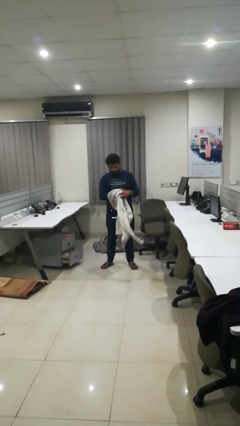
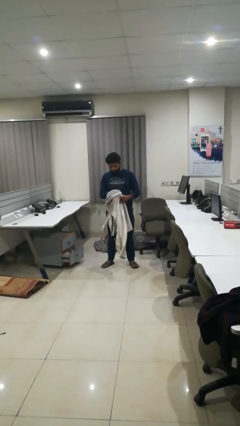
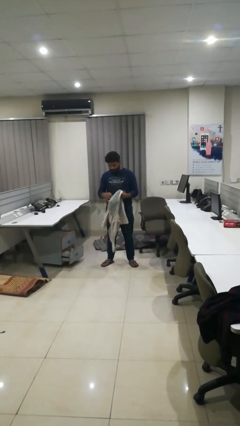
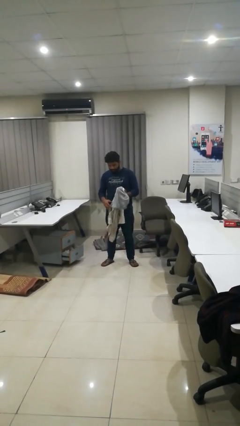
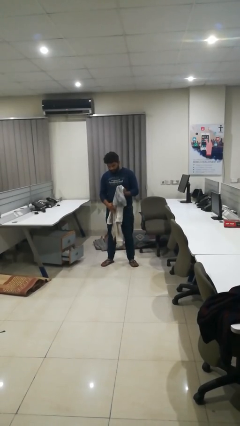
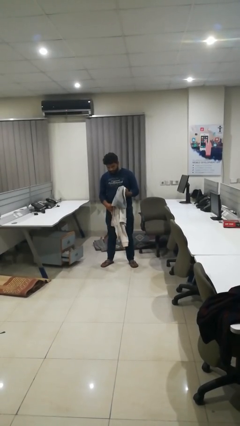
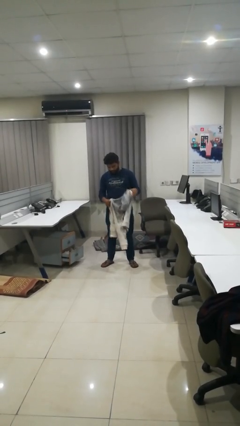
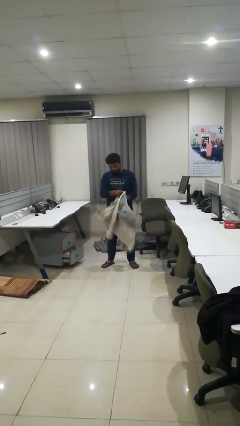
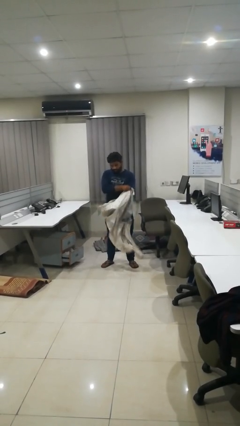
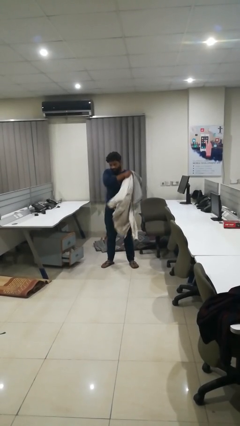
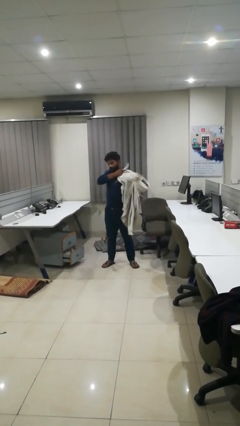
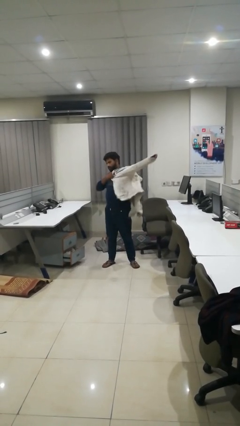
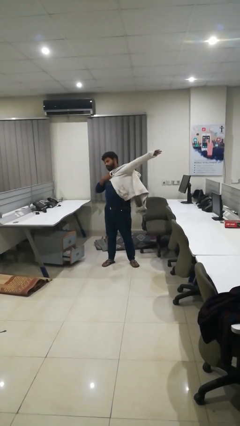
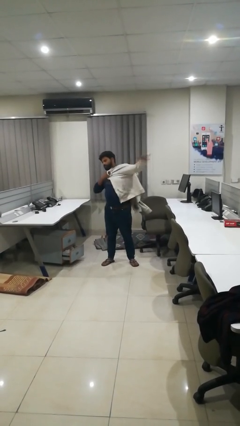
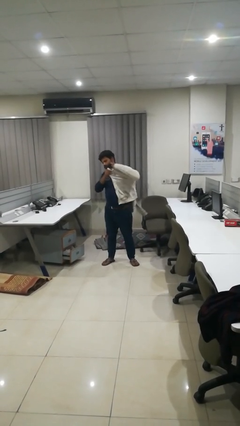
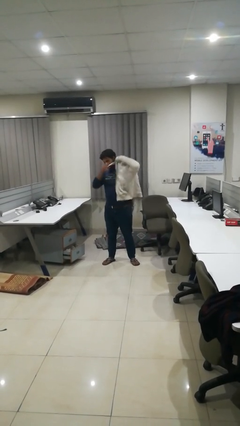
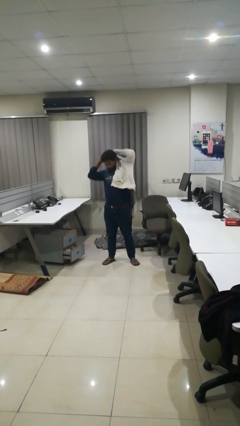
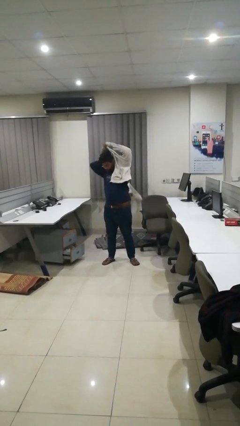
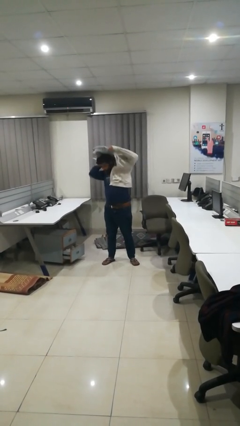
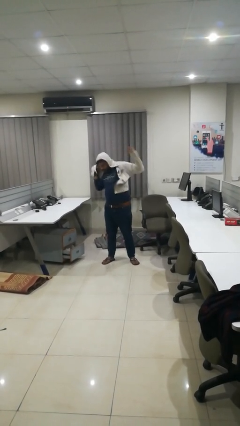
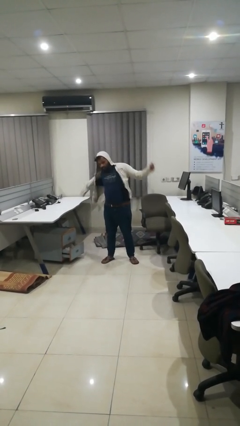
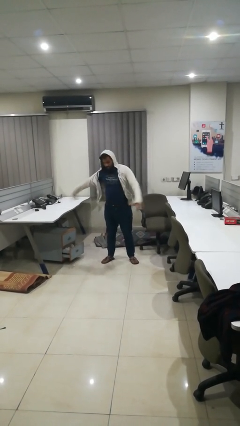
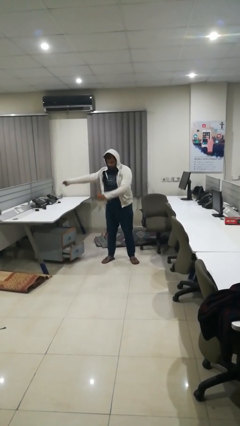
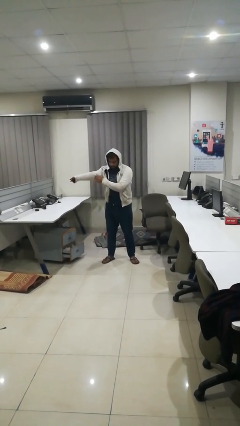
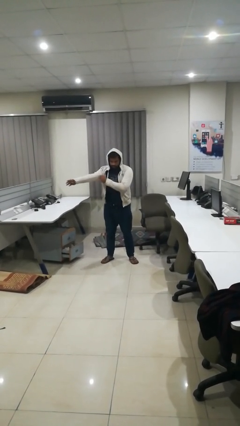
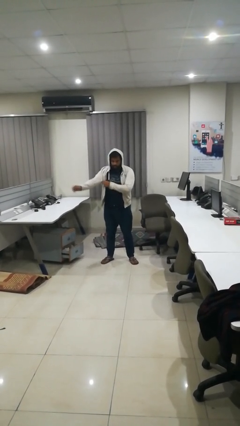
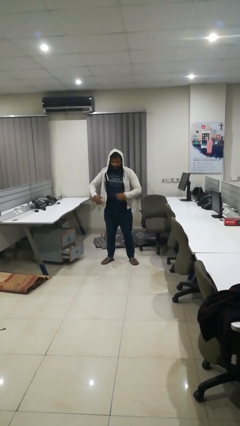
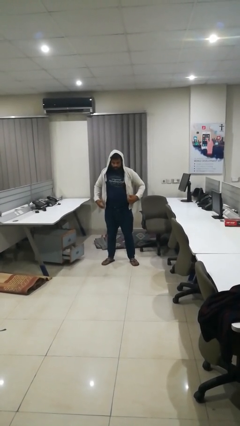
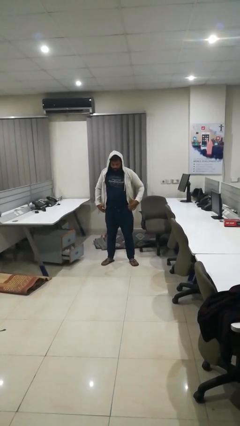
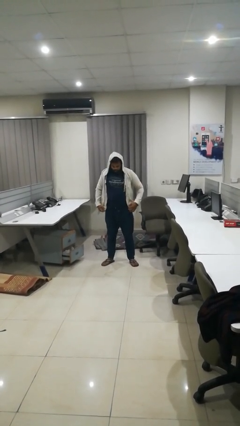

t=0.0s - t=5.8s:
person puts on hoodie

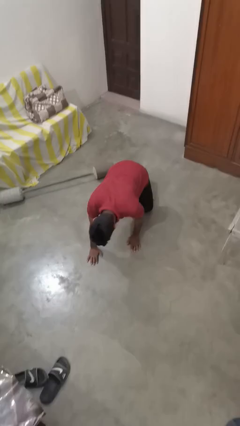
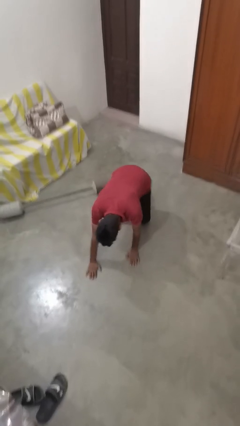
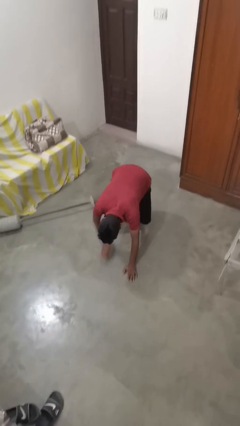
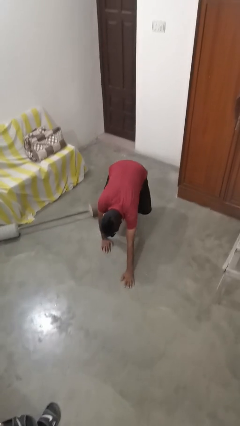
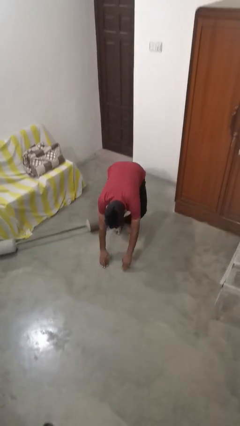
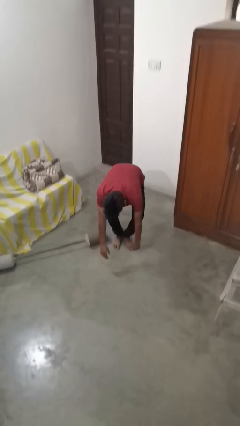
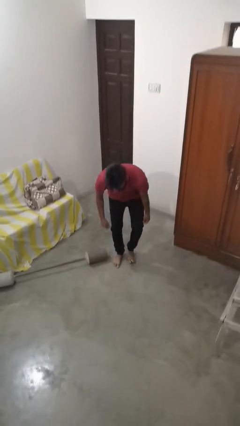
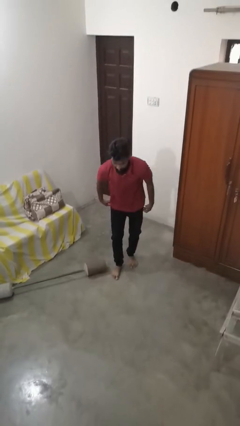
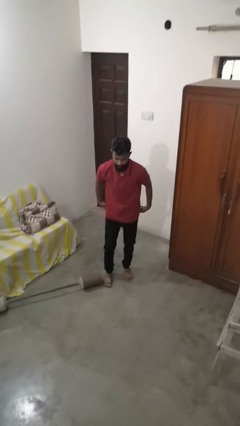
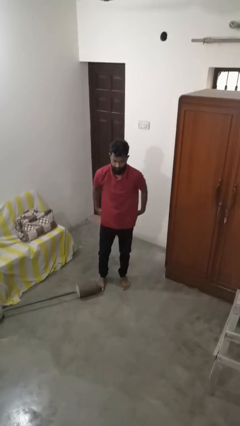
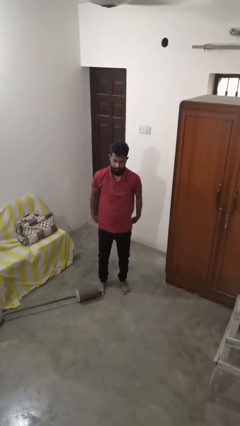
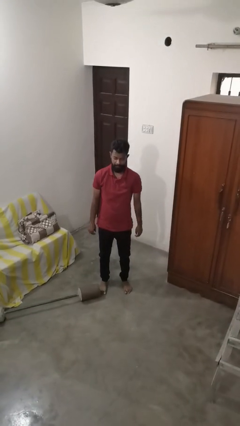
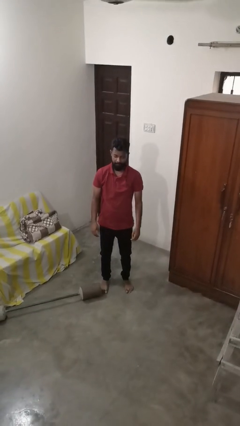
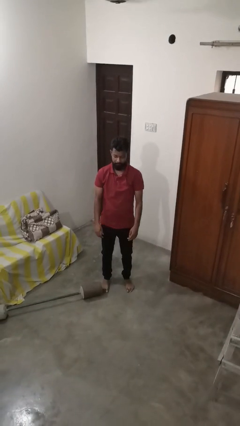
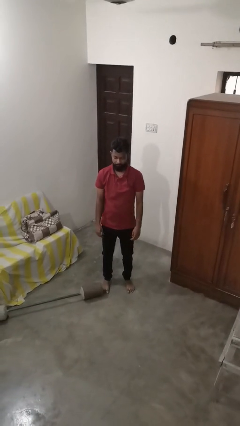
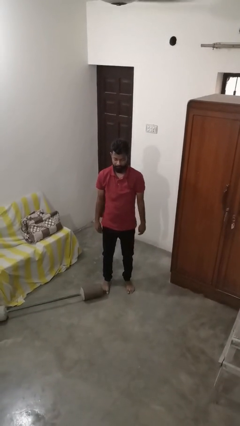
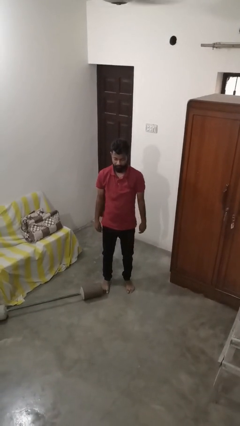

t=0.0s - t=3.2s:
person stands up from floor

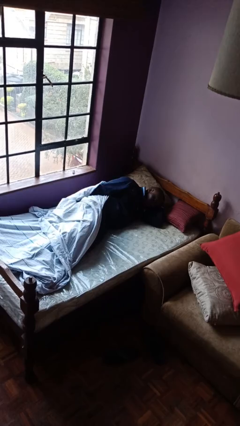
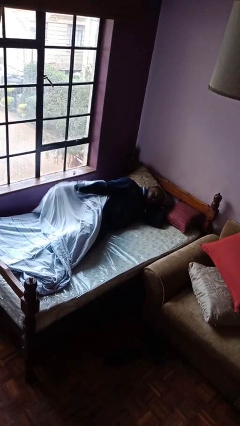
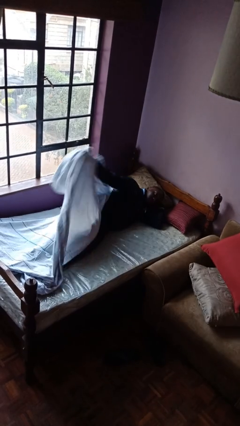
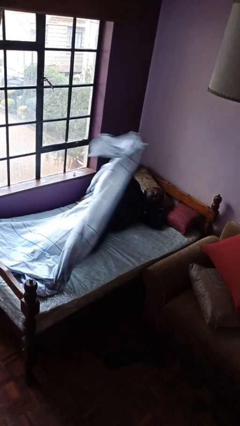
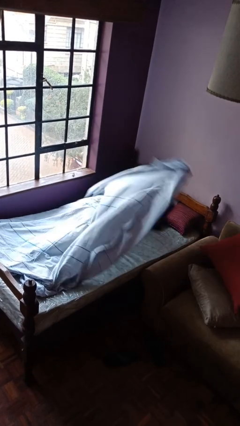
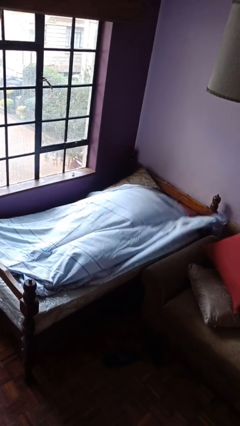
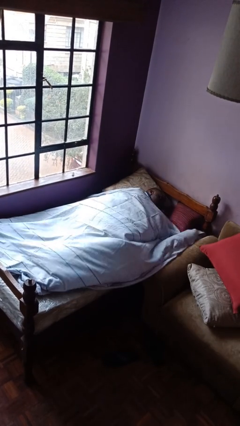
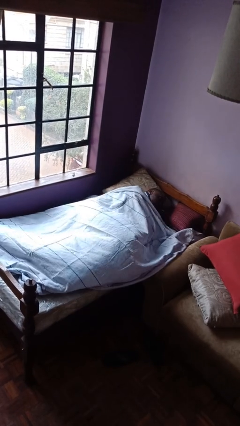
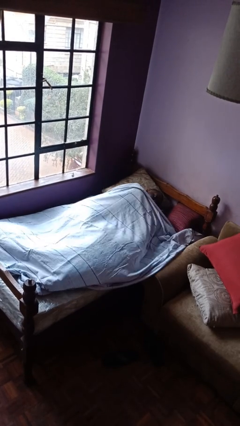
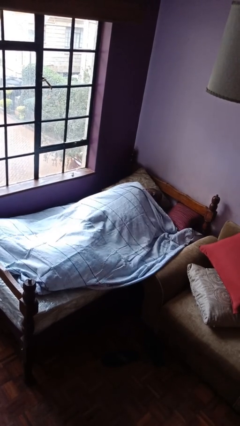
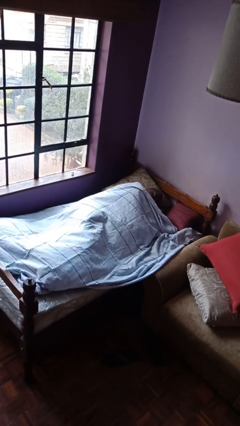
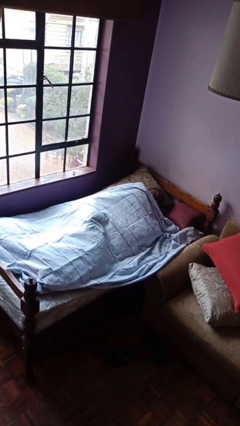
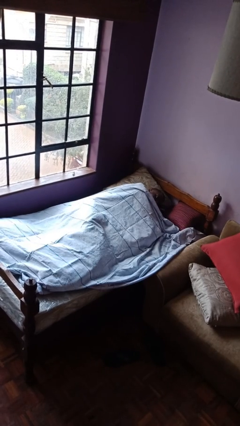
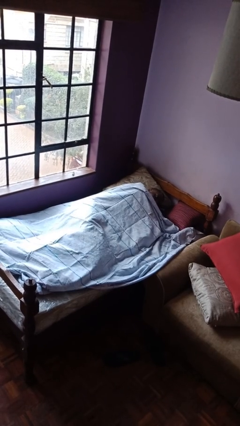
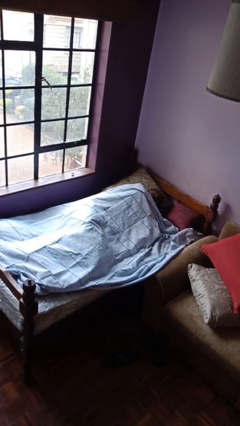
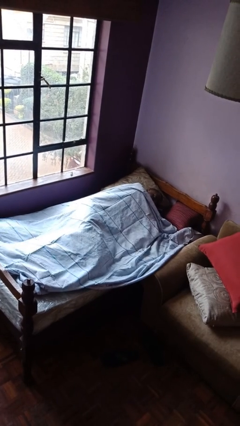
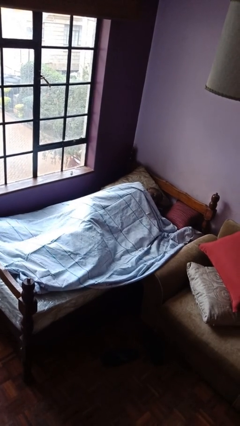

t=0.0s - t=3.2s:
person covers with bedsheets

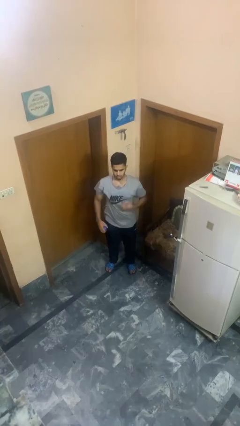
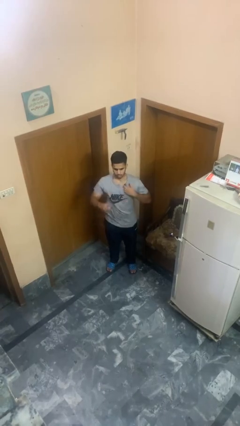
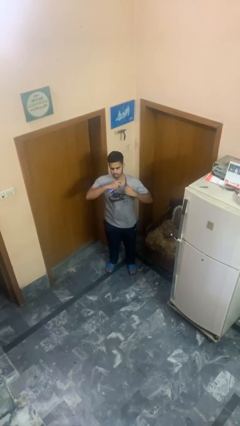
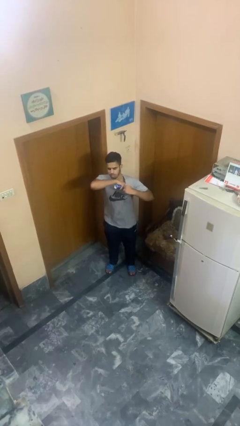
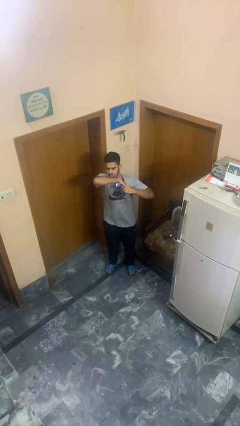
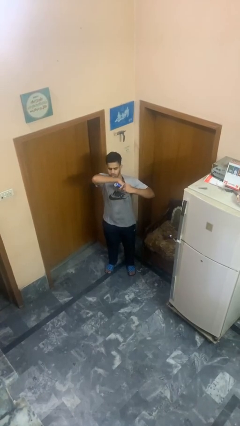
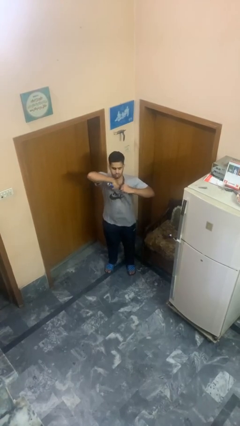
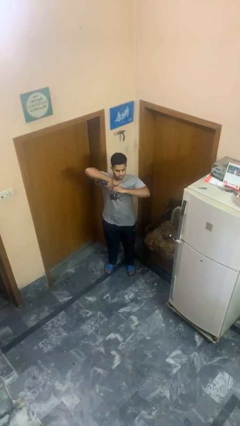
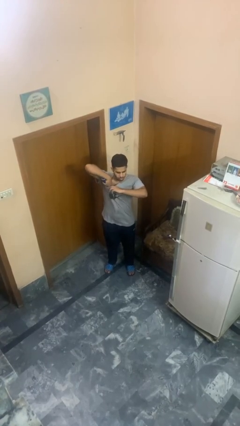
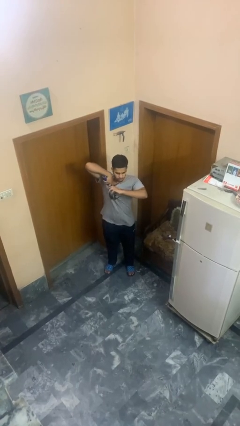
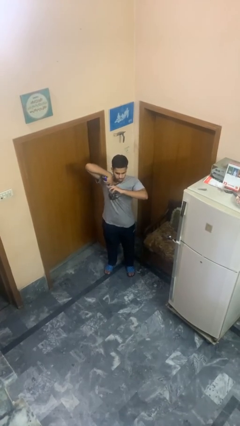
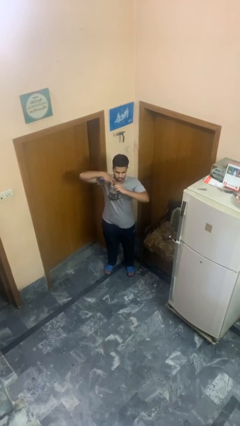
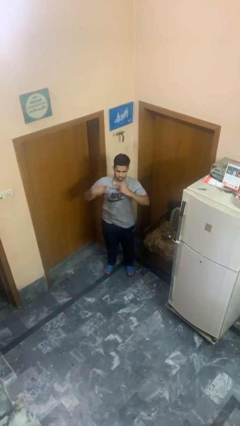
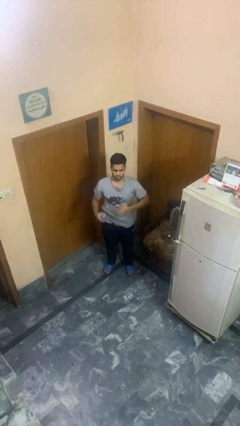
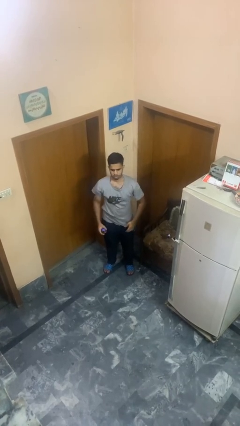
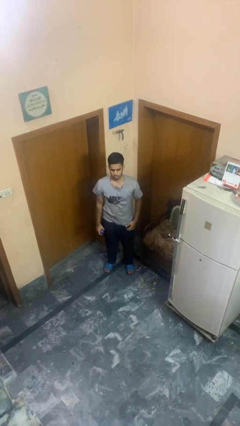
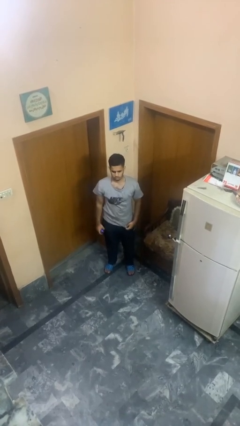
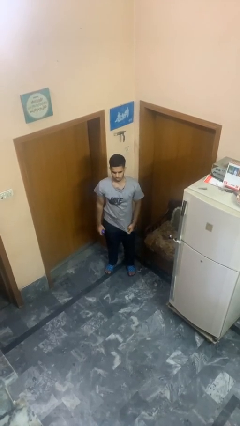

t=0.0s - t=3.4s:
person applies deodorant

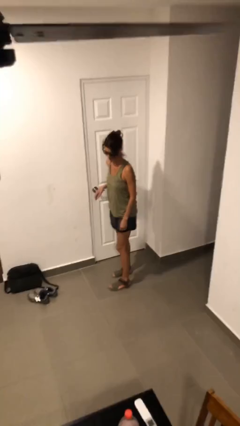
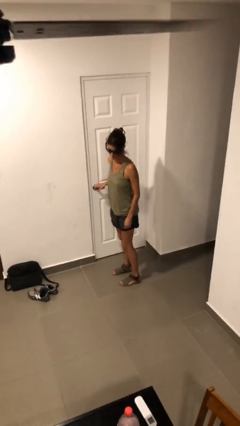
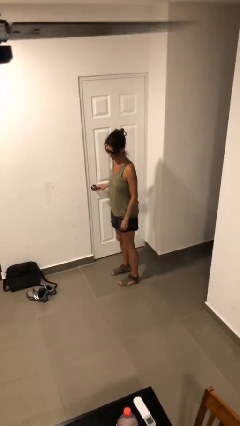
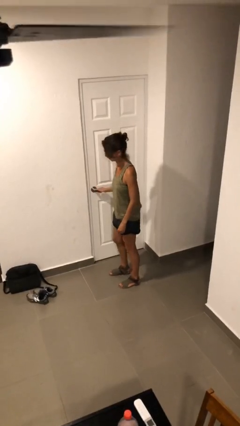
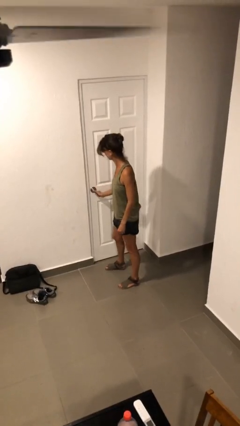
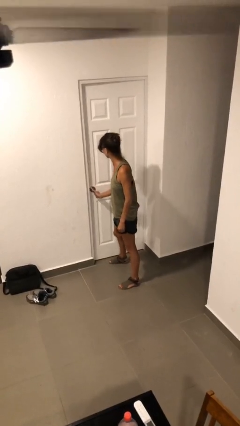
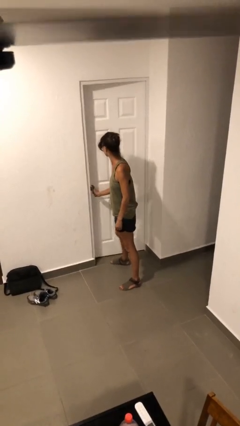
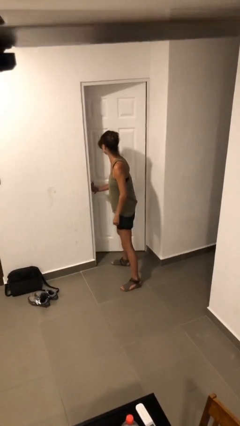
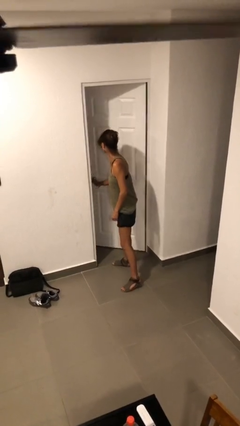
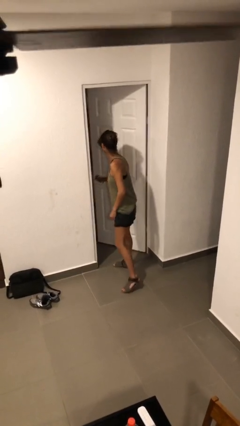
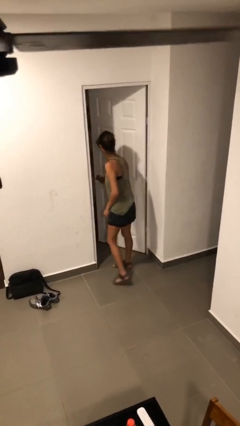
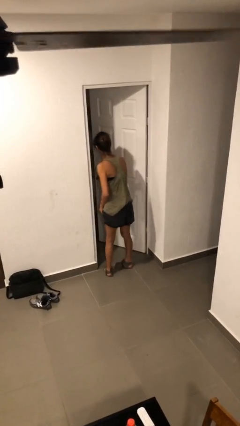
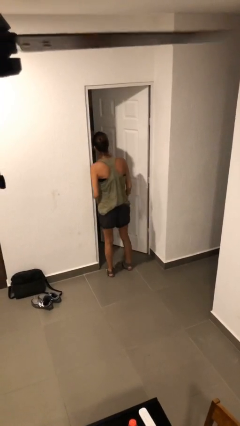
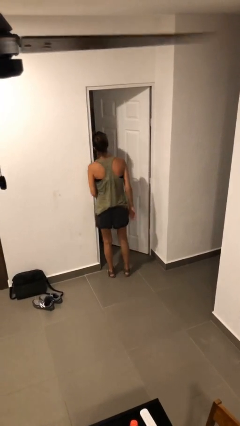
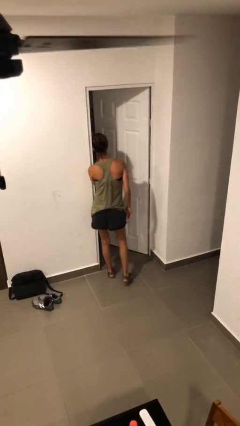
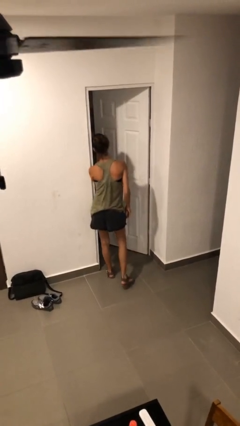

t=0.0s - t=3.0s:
person opens facility door
